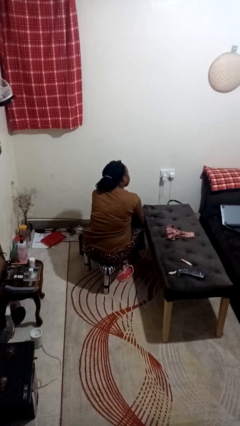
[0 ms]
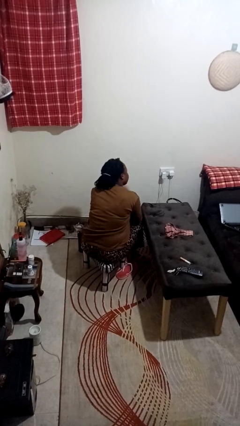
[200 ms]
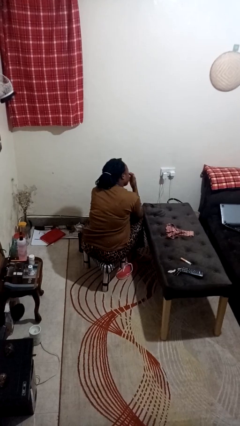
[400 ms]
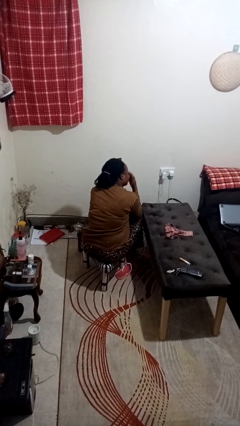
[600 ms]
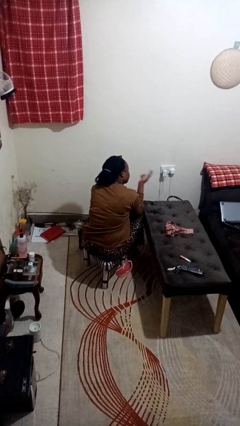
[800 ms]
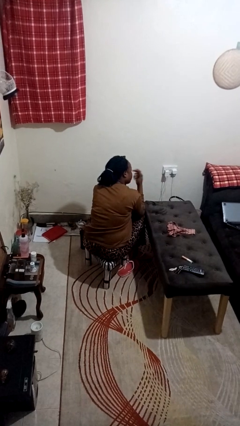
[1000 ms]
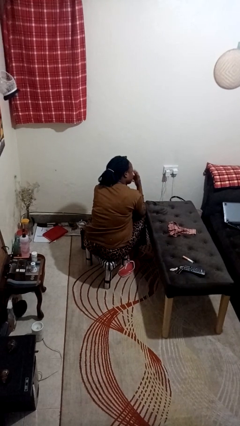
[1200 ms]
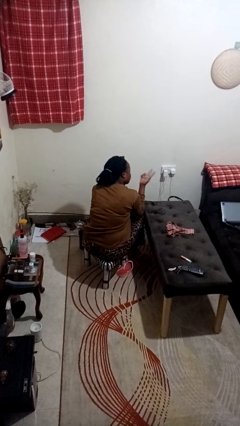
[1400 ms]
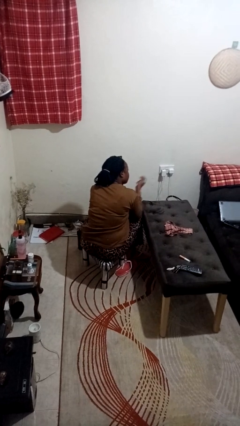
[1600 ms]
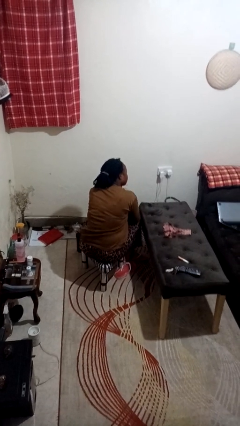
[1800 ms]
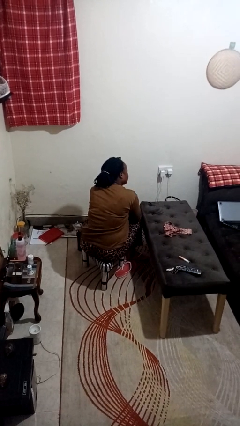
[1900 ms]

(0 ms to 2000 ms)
person gestures watch closely

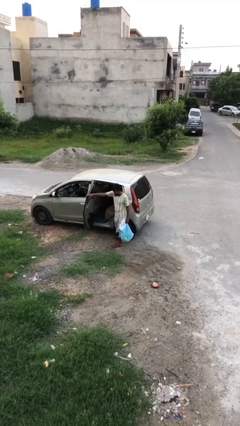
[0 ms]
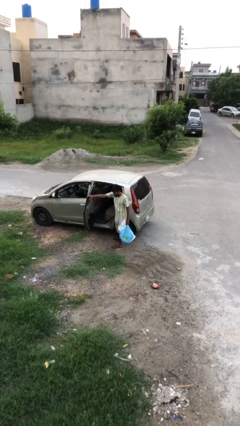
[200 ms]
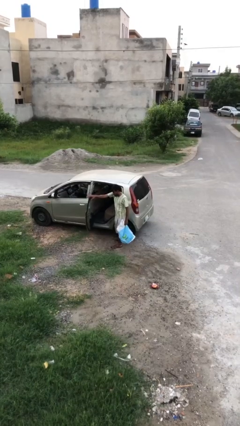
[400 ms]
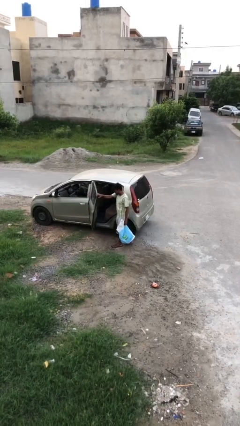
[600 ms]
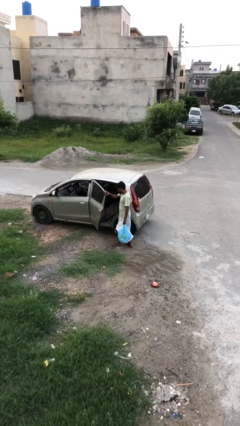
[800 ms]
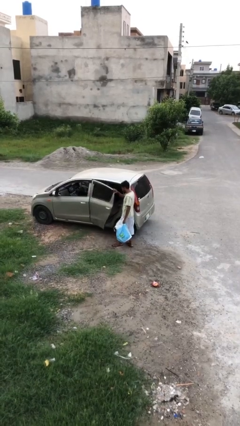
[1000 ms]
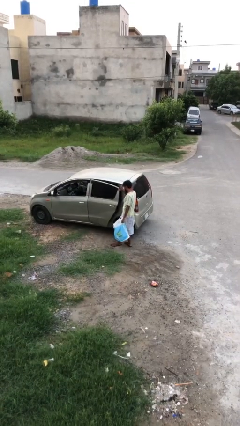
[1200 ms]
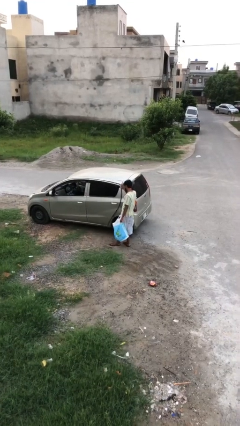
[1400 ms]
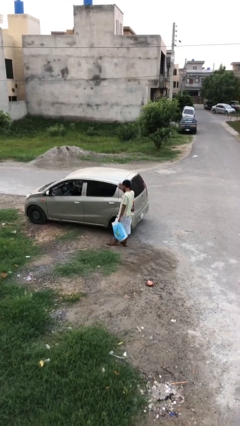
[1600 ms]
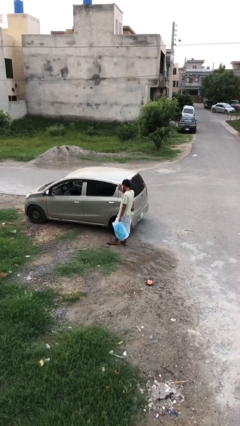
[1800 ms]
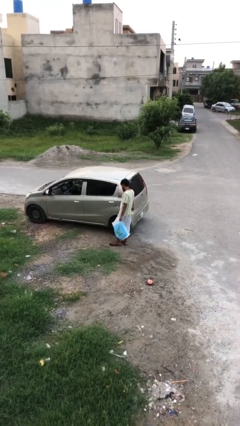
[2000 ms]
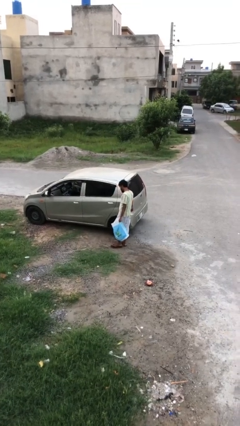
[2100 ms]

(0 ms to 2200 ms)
person closes car door

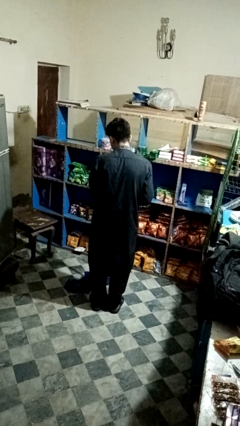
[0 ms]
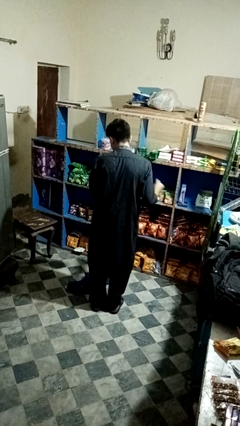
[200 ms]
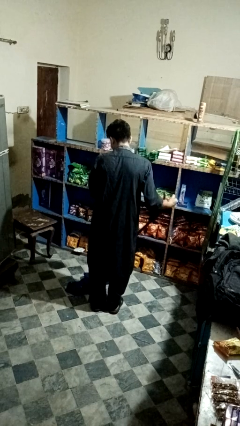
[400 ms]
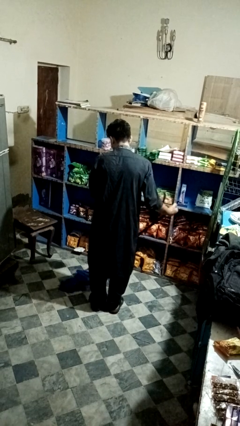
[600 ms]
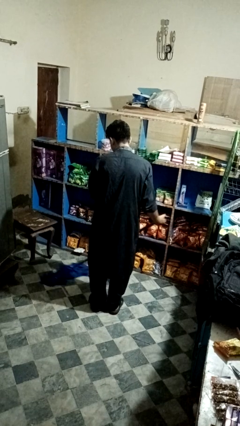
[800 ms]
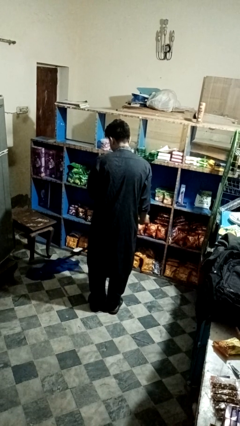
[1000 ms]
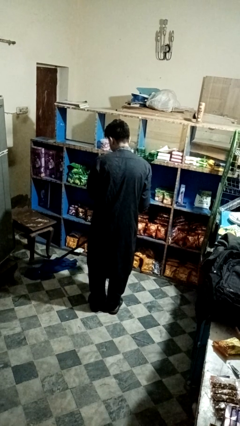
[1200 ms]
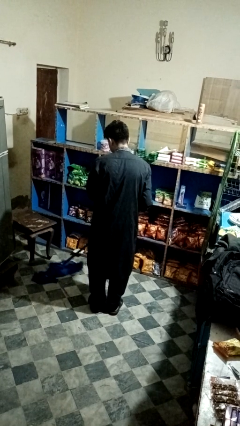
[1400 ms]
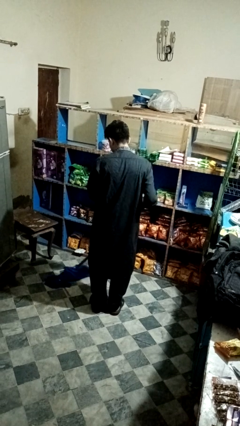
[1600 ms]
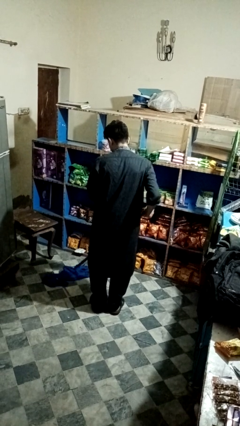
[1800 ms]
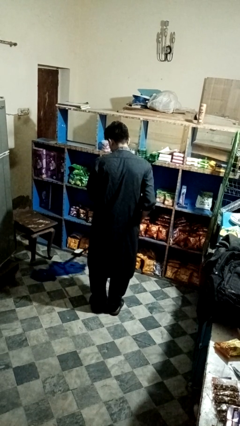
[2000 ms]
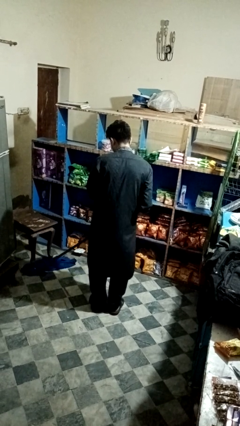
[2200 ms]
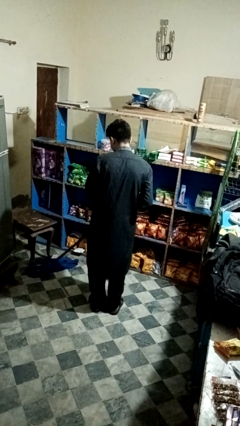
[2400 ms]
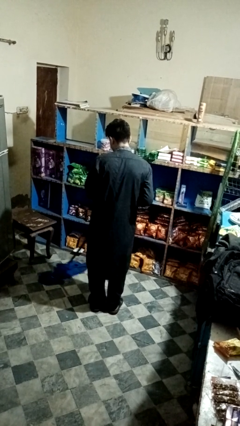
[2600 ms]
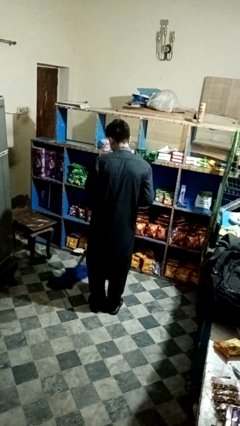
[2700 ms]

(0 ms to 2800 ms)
person mops

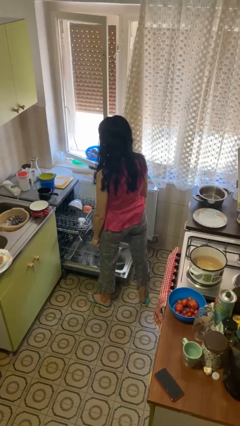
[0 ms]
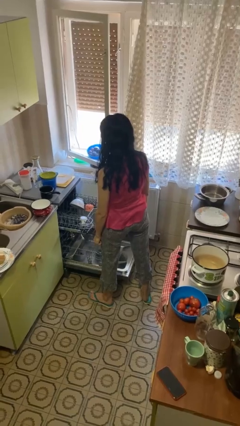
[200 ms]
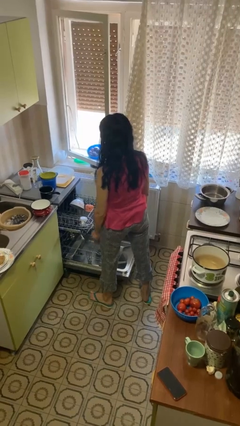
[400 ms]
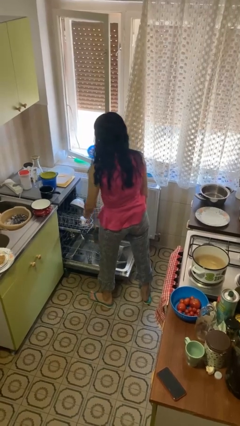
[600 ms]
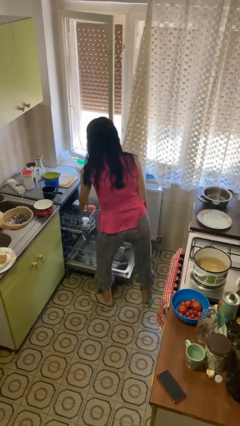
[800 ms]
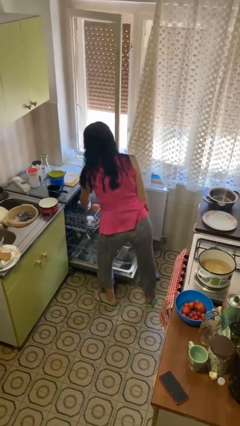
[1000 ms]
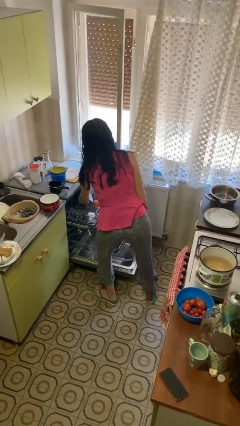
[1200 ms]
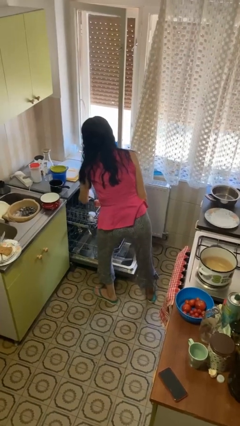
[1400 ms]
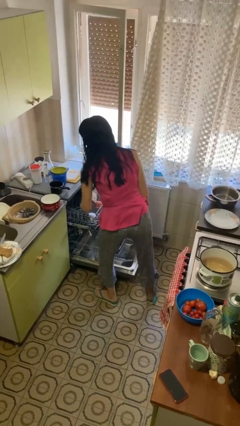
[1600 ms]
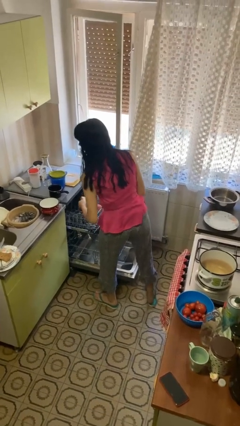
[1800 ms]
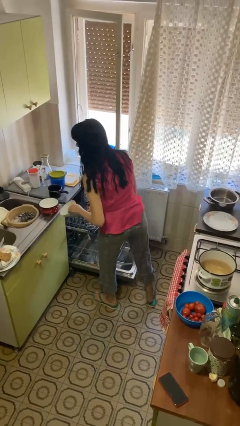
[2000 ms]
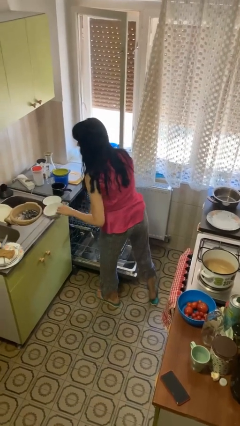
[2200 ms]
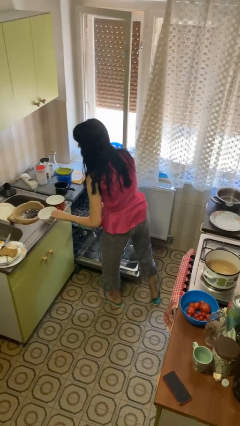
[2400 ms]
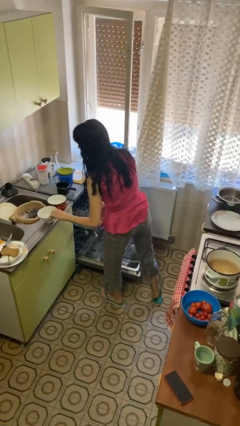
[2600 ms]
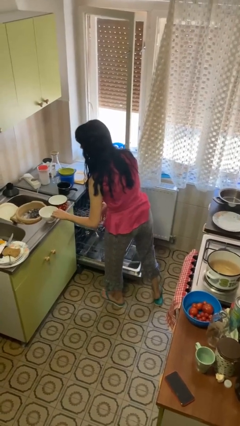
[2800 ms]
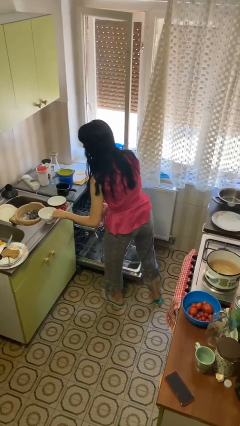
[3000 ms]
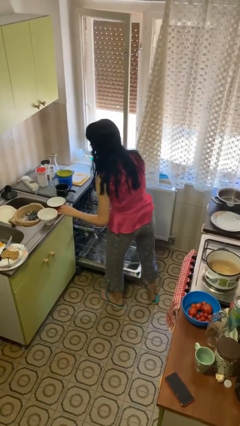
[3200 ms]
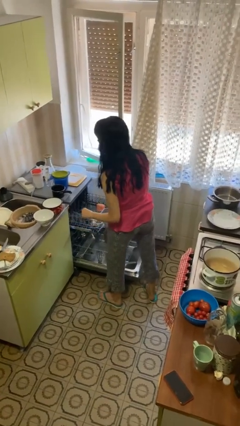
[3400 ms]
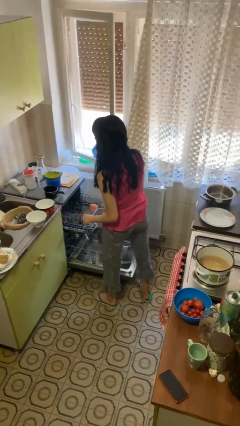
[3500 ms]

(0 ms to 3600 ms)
person unloads dishwasher

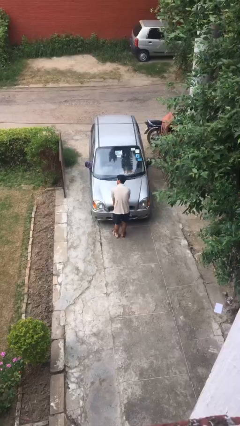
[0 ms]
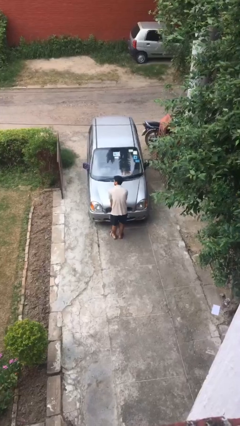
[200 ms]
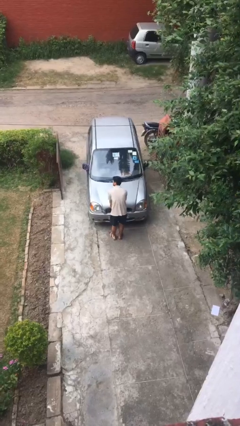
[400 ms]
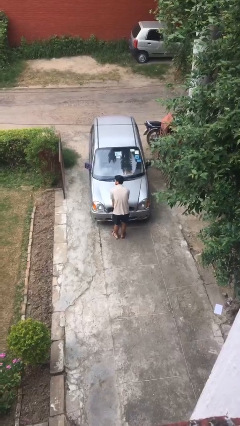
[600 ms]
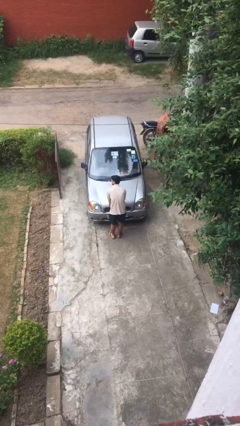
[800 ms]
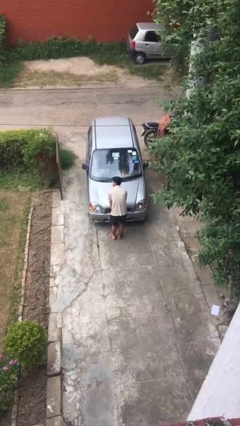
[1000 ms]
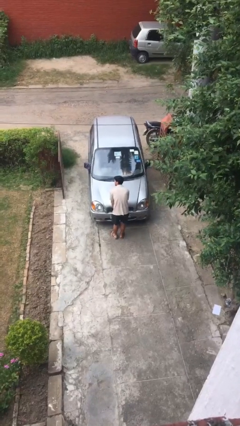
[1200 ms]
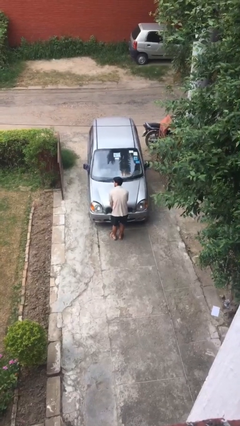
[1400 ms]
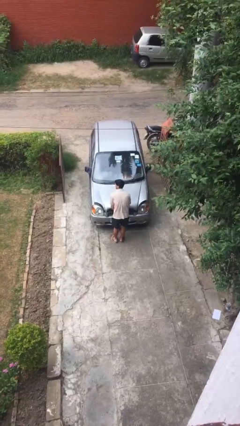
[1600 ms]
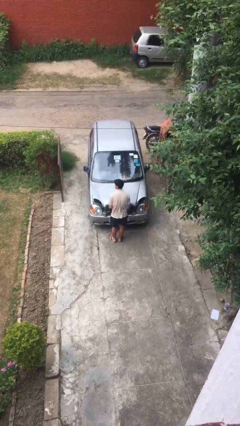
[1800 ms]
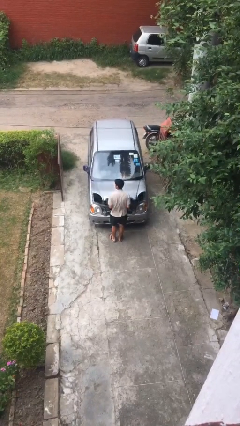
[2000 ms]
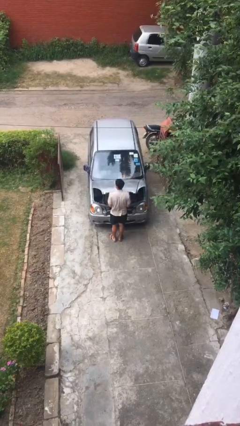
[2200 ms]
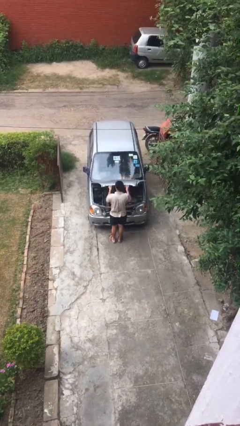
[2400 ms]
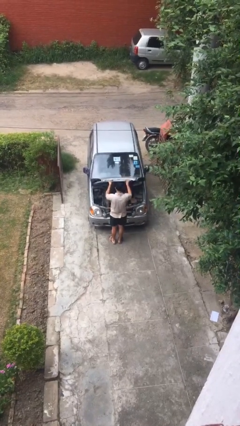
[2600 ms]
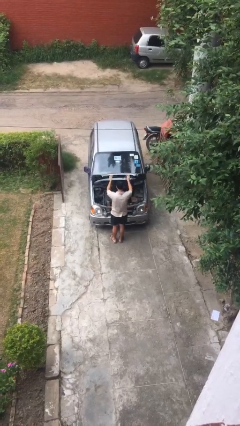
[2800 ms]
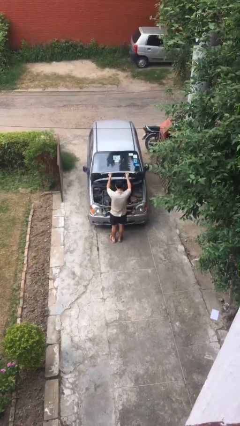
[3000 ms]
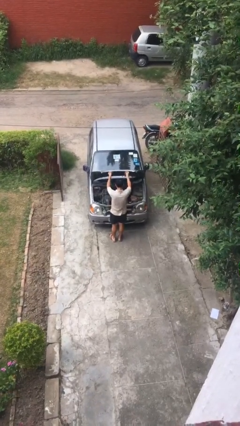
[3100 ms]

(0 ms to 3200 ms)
person opens car hood

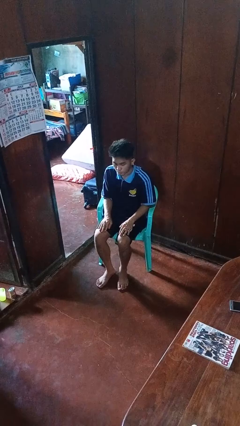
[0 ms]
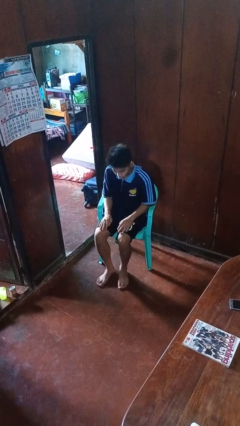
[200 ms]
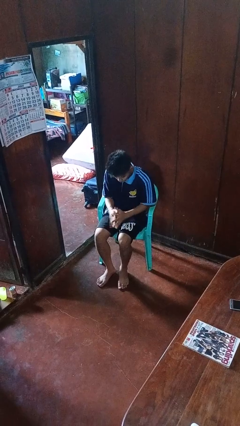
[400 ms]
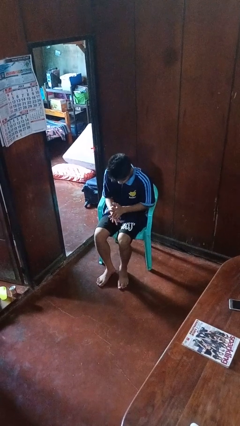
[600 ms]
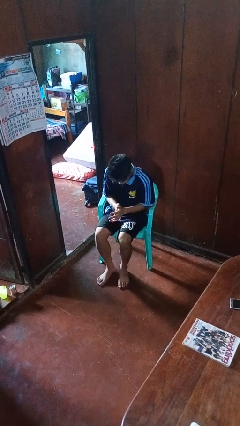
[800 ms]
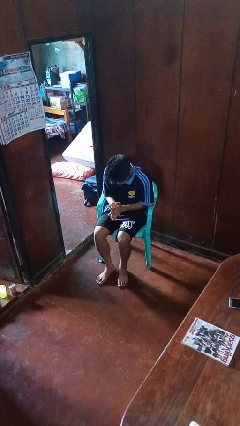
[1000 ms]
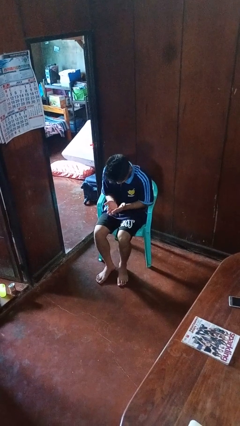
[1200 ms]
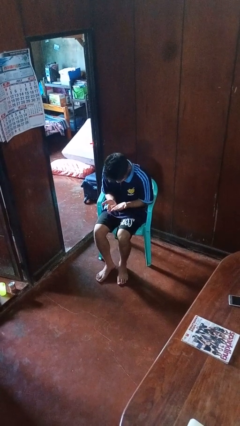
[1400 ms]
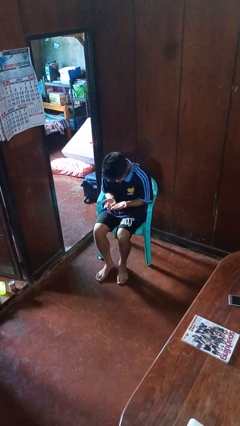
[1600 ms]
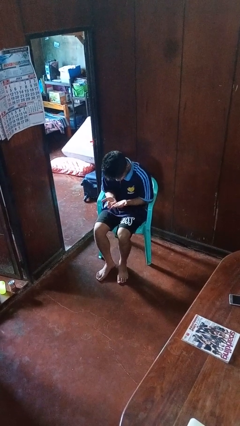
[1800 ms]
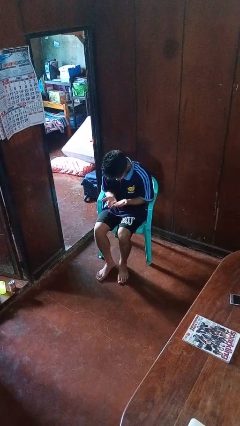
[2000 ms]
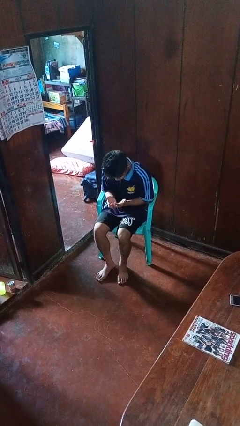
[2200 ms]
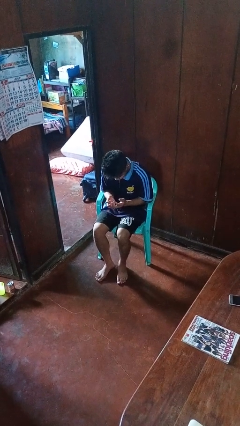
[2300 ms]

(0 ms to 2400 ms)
person looks at hands in lap

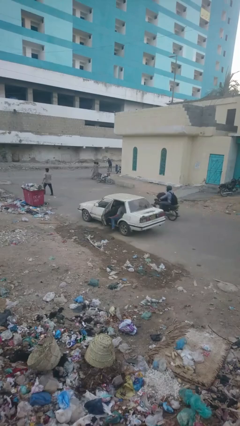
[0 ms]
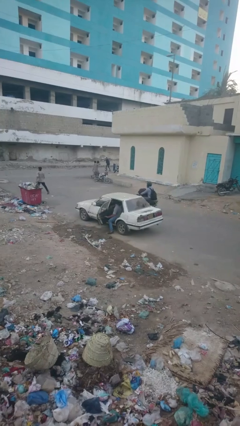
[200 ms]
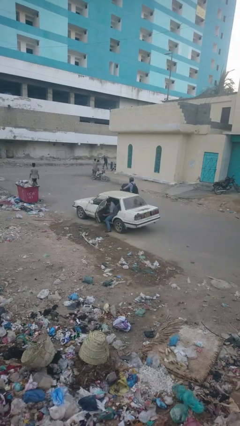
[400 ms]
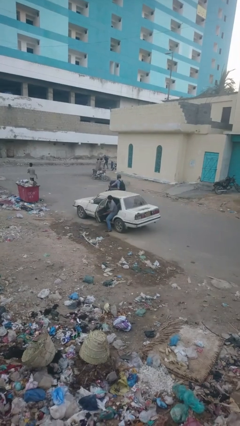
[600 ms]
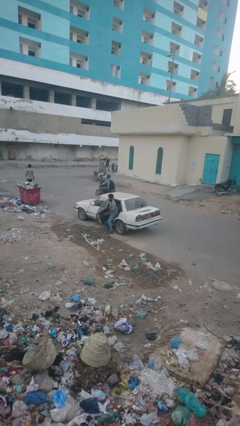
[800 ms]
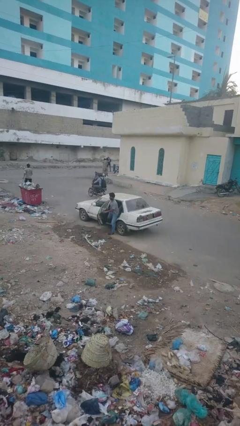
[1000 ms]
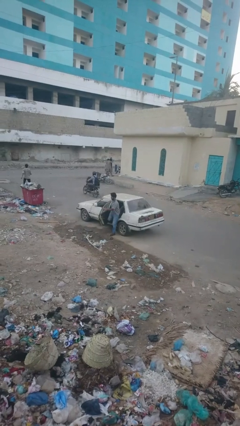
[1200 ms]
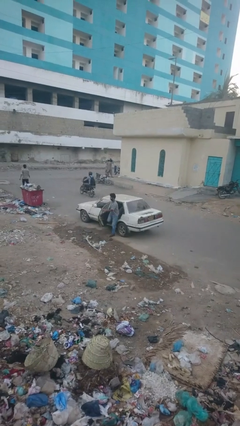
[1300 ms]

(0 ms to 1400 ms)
car drops off person
